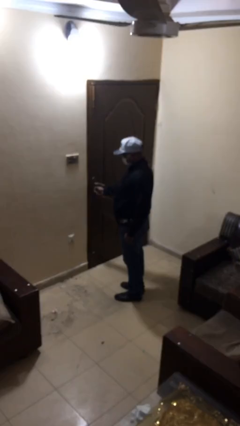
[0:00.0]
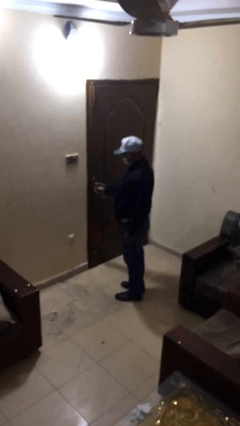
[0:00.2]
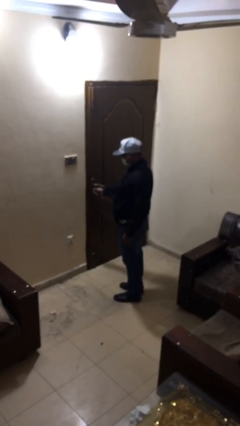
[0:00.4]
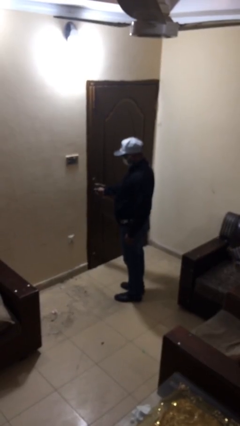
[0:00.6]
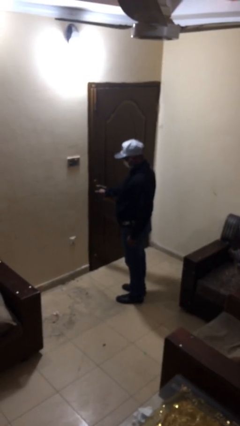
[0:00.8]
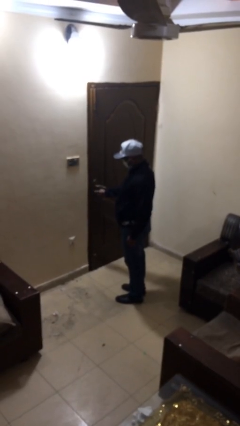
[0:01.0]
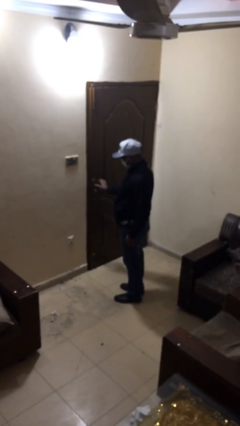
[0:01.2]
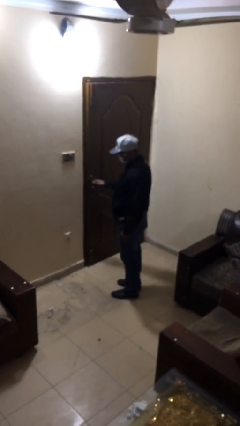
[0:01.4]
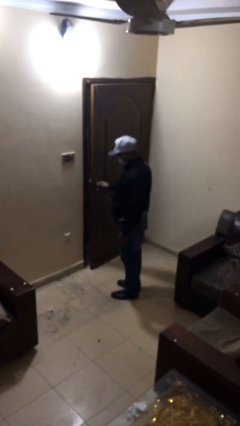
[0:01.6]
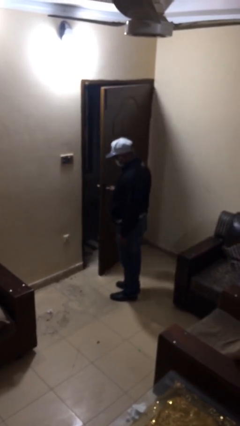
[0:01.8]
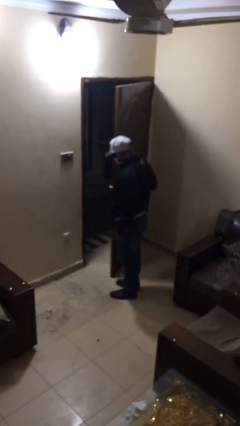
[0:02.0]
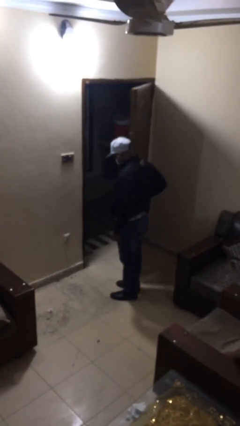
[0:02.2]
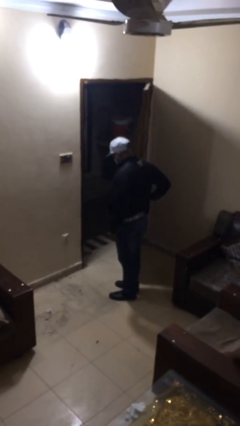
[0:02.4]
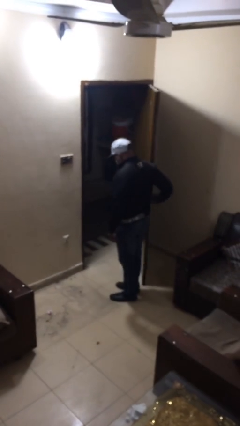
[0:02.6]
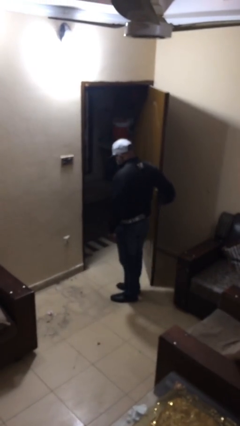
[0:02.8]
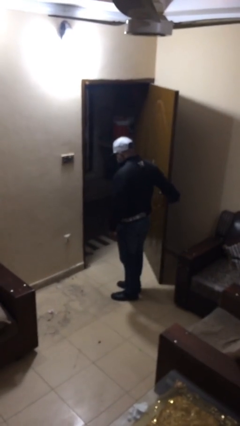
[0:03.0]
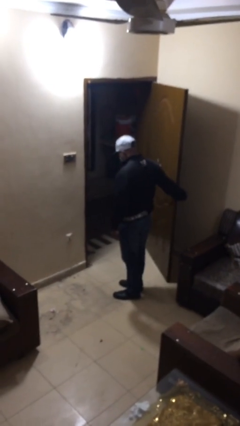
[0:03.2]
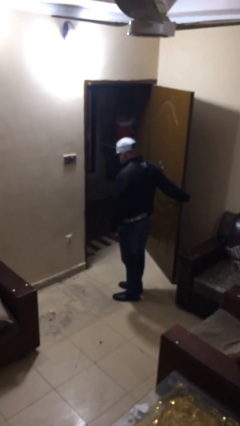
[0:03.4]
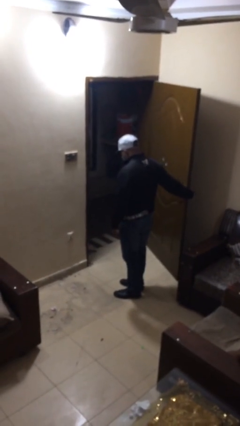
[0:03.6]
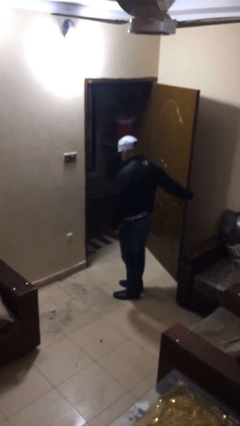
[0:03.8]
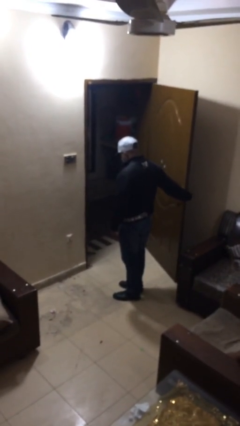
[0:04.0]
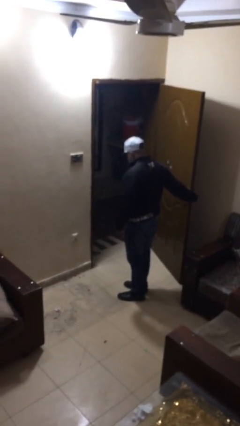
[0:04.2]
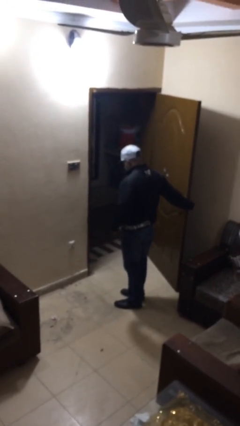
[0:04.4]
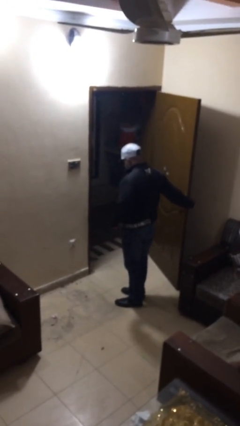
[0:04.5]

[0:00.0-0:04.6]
person opens facility door

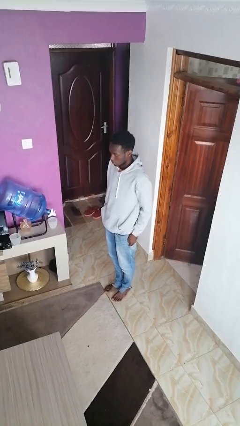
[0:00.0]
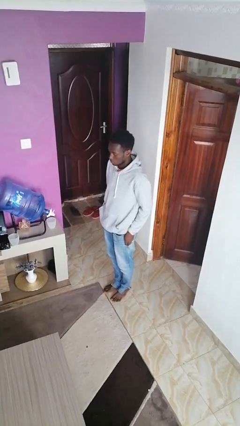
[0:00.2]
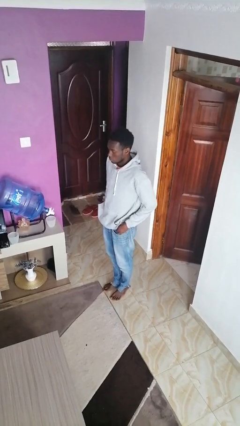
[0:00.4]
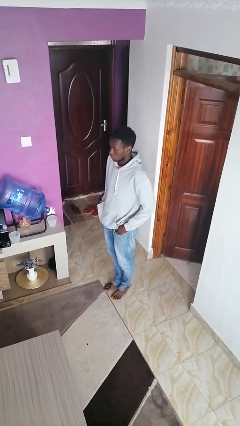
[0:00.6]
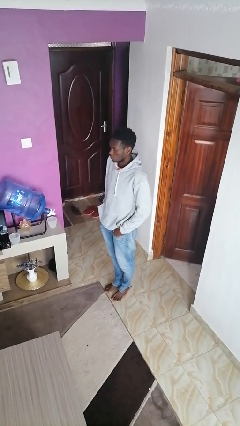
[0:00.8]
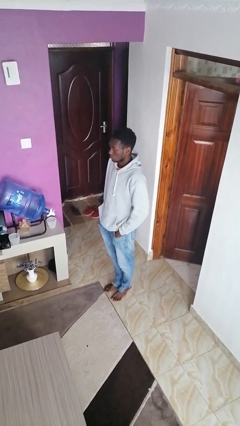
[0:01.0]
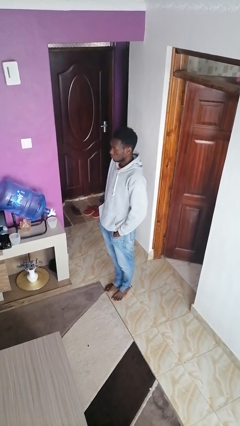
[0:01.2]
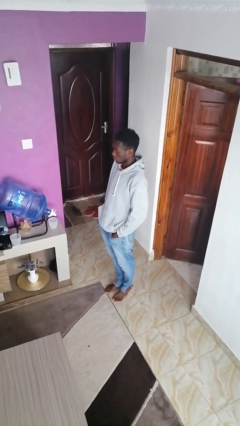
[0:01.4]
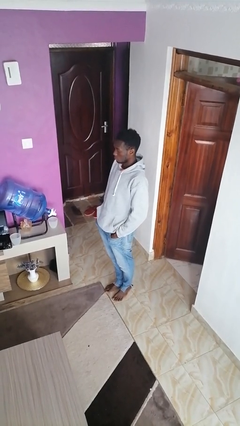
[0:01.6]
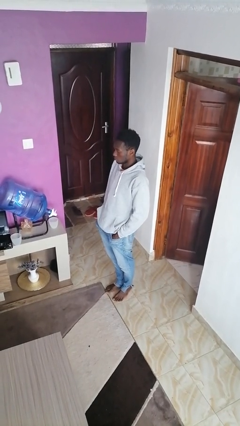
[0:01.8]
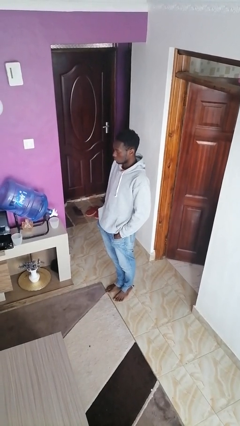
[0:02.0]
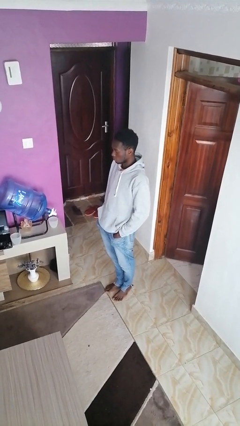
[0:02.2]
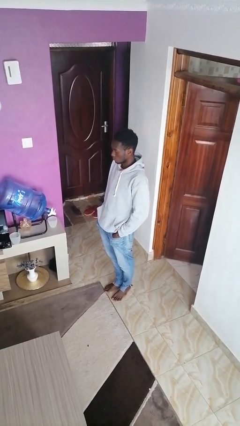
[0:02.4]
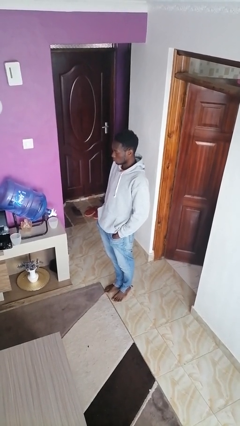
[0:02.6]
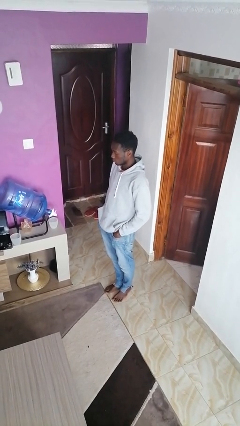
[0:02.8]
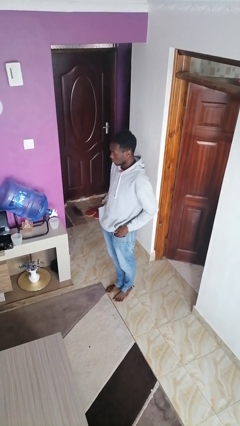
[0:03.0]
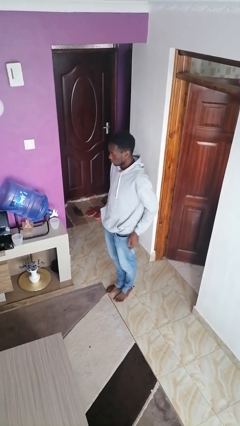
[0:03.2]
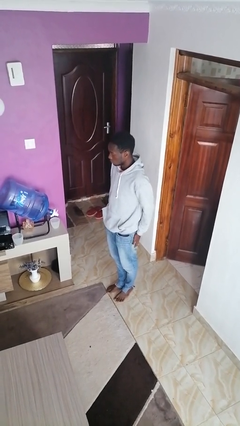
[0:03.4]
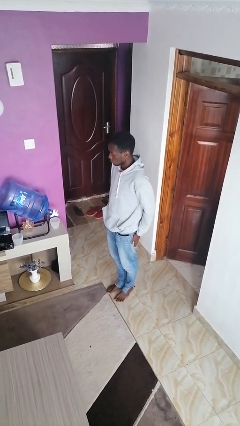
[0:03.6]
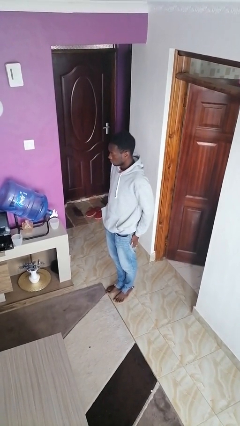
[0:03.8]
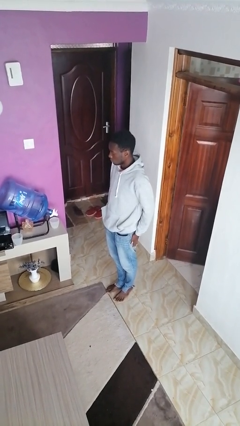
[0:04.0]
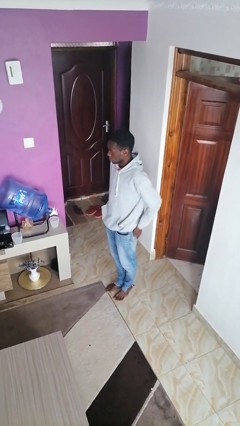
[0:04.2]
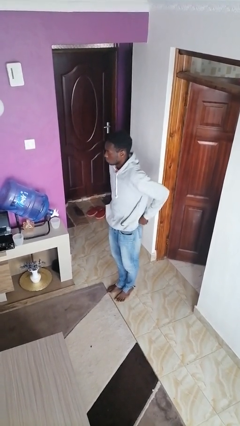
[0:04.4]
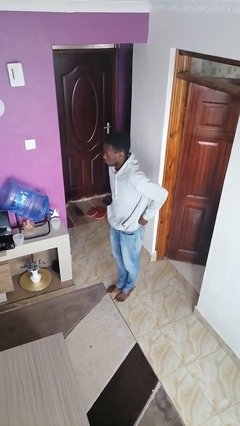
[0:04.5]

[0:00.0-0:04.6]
person puts hands in back pockets

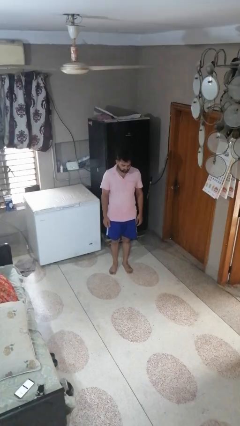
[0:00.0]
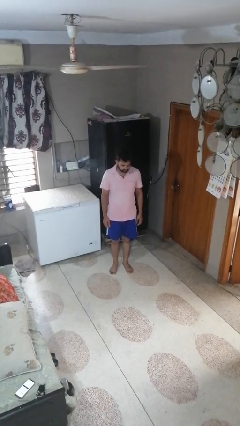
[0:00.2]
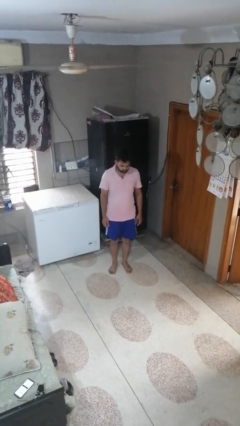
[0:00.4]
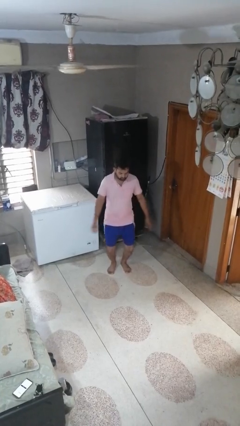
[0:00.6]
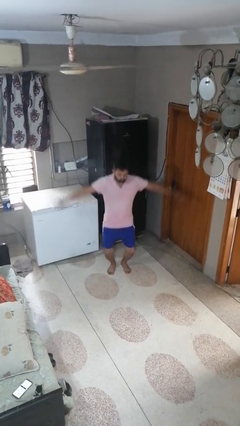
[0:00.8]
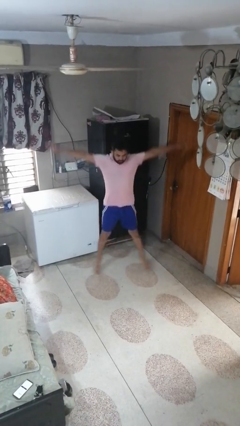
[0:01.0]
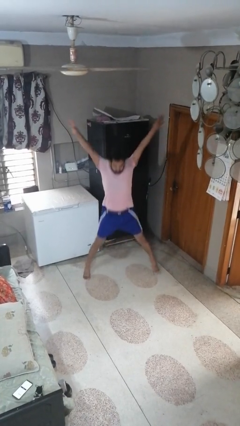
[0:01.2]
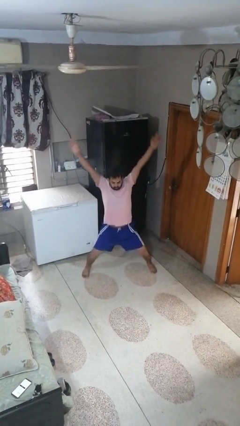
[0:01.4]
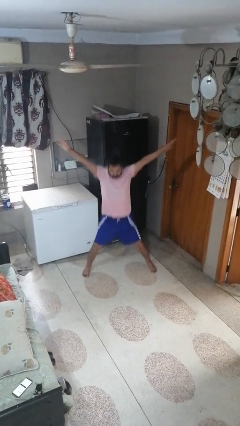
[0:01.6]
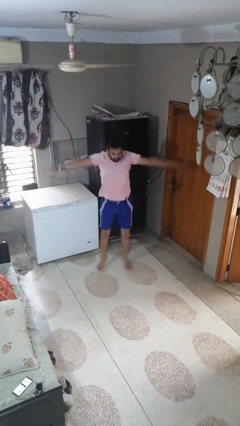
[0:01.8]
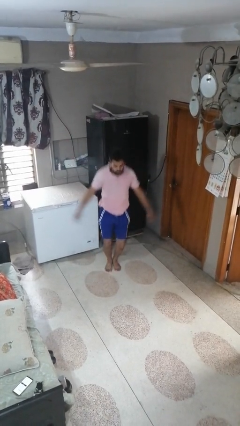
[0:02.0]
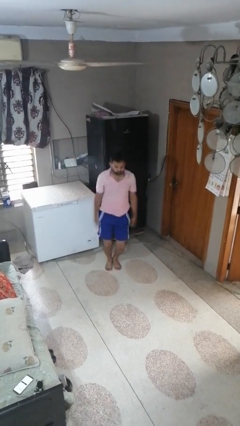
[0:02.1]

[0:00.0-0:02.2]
person exercises with jumping jacks

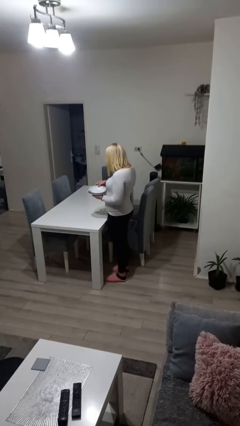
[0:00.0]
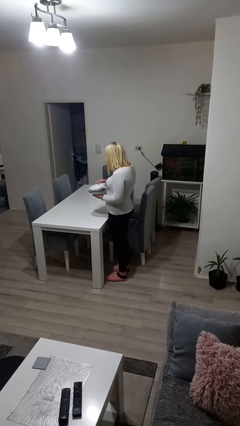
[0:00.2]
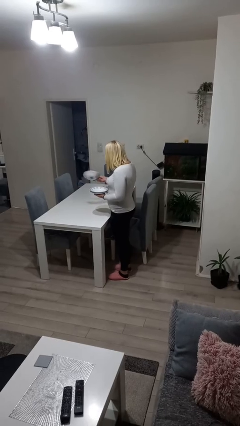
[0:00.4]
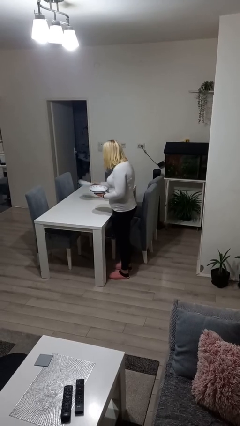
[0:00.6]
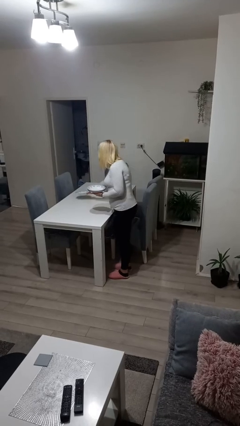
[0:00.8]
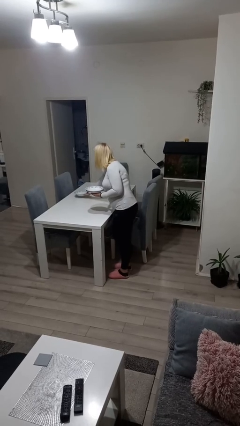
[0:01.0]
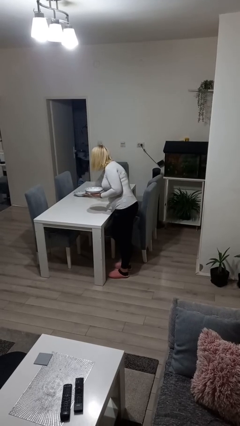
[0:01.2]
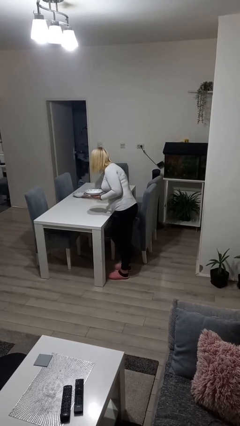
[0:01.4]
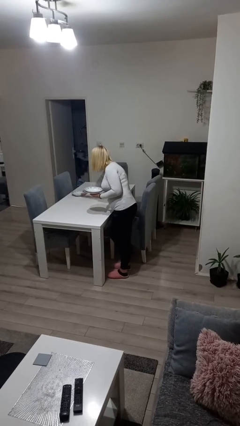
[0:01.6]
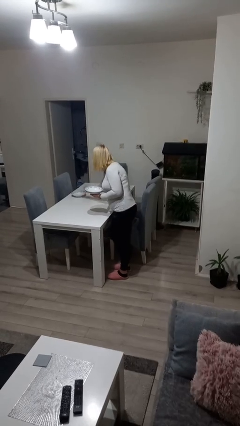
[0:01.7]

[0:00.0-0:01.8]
person sets table

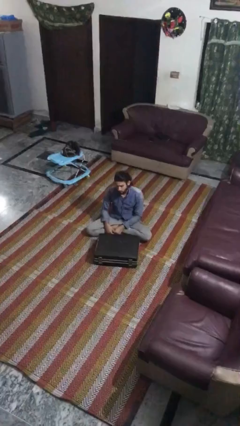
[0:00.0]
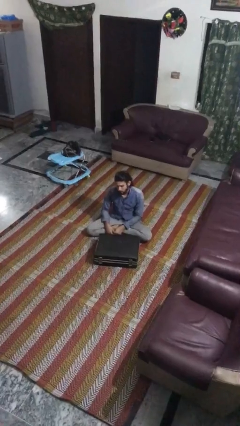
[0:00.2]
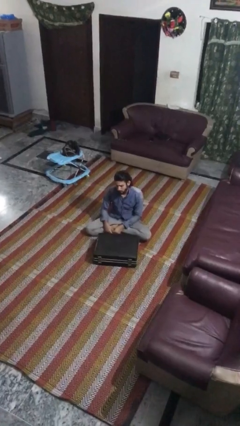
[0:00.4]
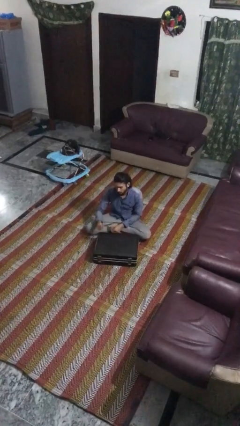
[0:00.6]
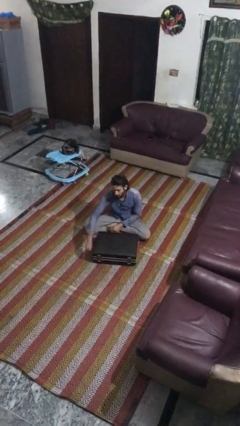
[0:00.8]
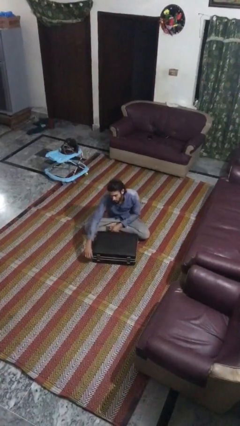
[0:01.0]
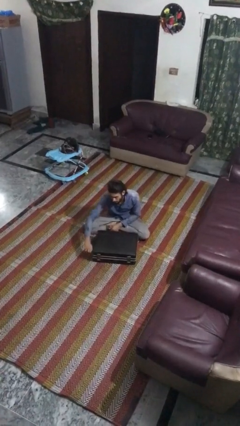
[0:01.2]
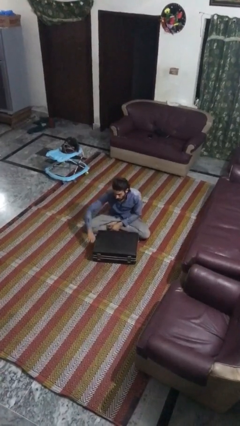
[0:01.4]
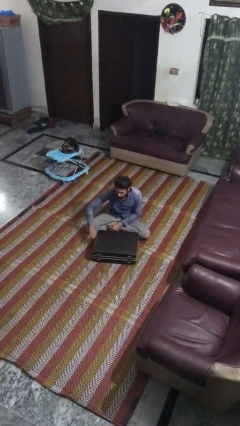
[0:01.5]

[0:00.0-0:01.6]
person opens suitcase

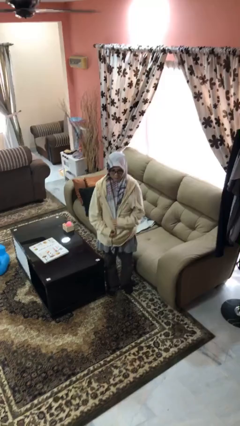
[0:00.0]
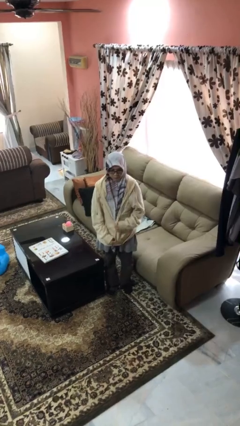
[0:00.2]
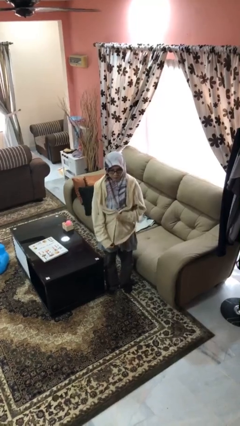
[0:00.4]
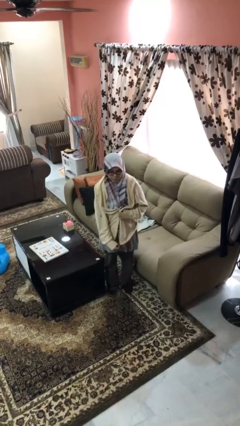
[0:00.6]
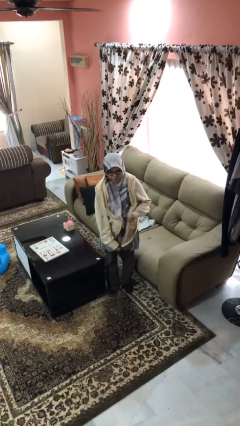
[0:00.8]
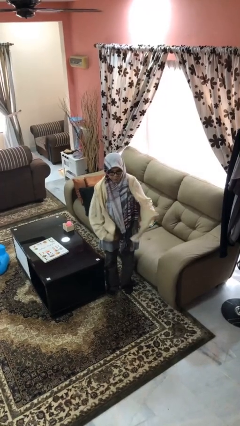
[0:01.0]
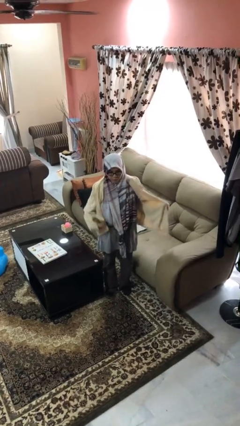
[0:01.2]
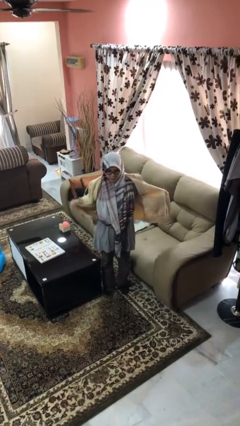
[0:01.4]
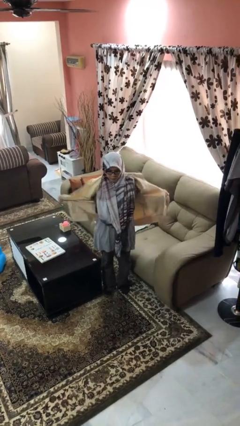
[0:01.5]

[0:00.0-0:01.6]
person unzips jacket

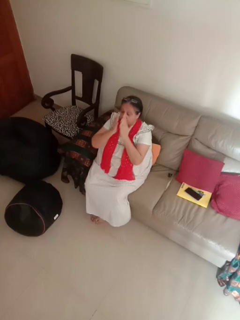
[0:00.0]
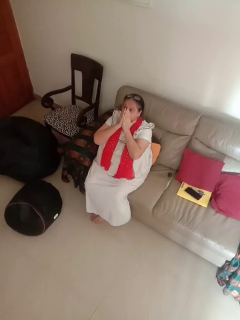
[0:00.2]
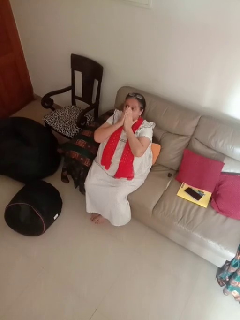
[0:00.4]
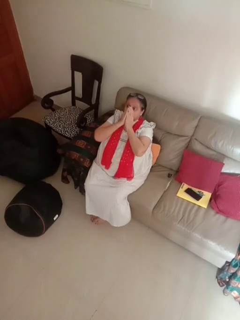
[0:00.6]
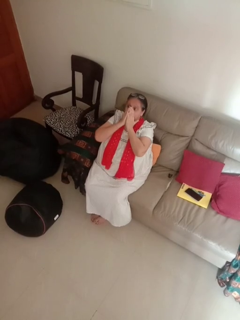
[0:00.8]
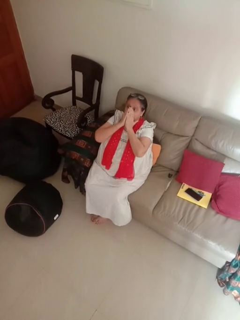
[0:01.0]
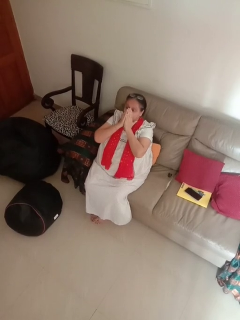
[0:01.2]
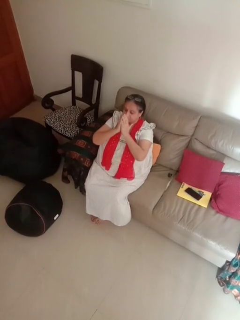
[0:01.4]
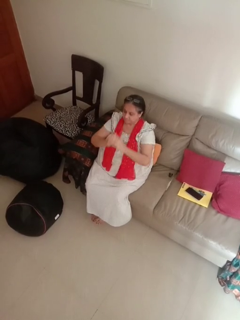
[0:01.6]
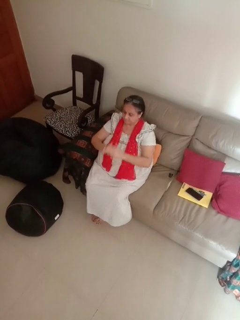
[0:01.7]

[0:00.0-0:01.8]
person covers face with hands
